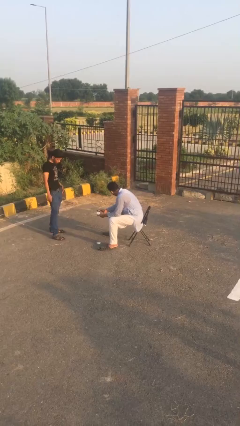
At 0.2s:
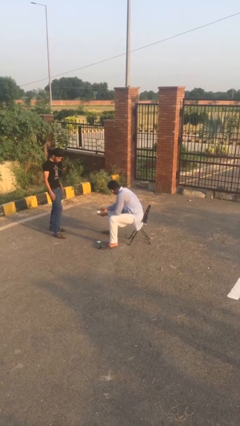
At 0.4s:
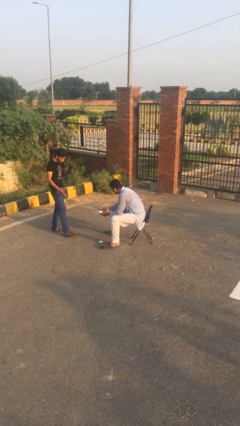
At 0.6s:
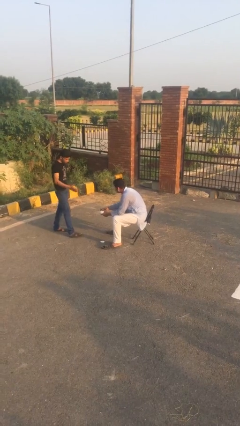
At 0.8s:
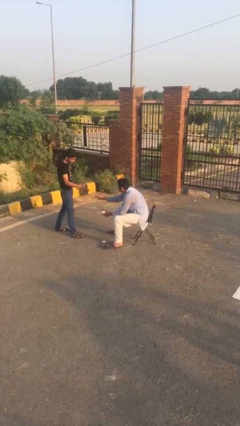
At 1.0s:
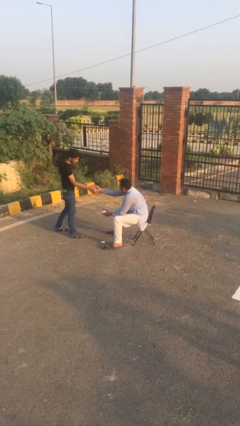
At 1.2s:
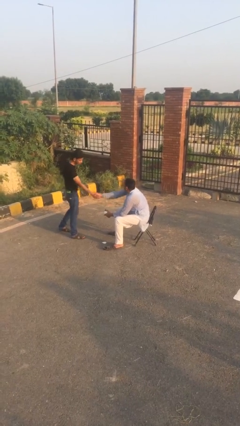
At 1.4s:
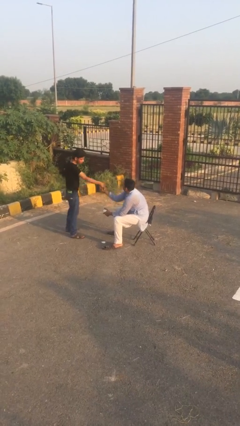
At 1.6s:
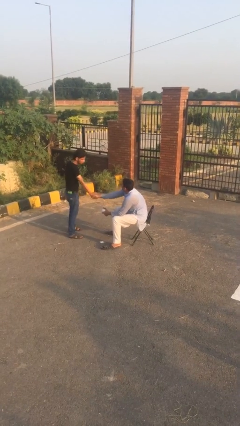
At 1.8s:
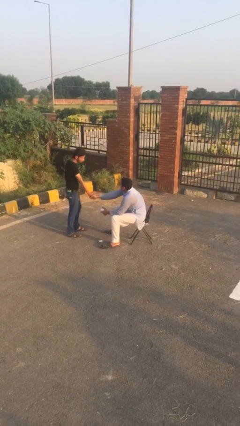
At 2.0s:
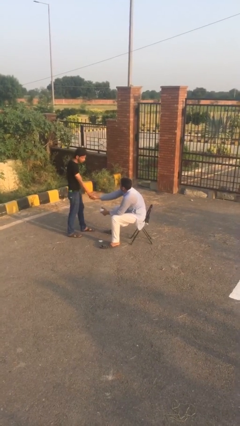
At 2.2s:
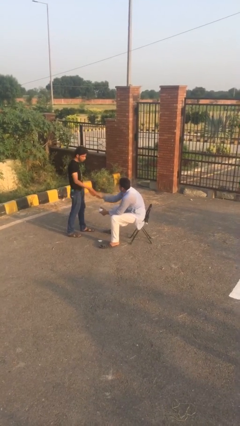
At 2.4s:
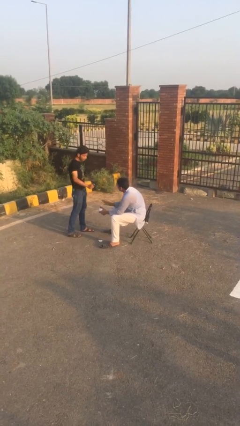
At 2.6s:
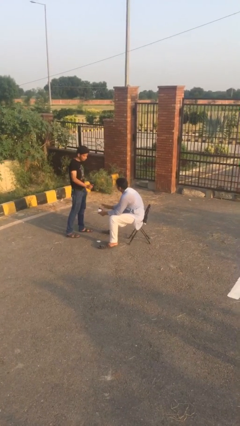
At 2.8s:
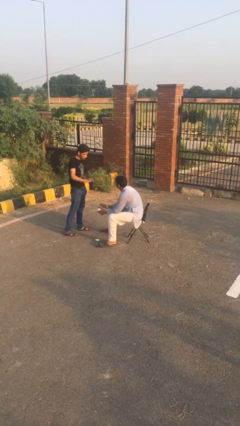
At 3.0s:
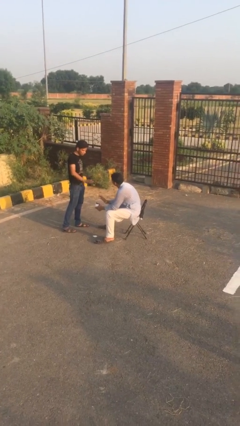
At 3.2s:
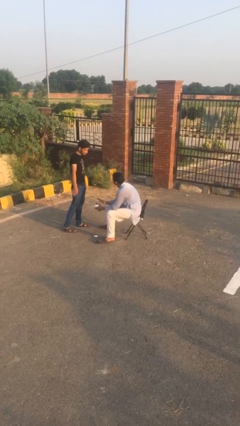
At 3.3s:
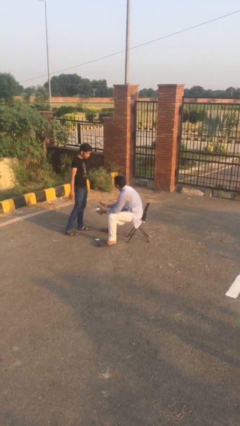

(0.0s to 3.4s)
person shakes hand

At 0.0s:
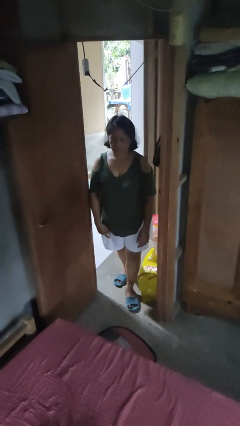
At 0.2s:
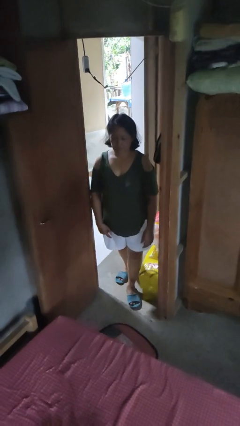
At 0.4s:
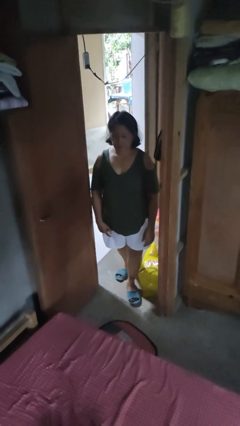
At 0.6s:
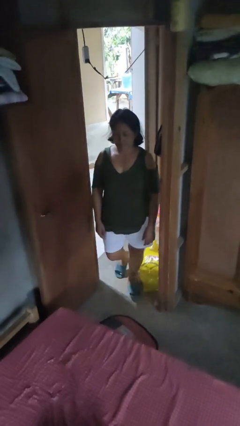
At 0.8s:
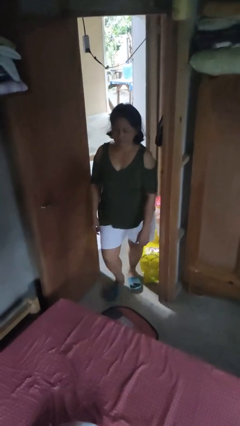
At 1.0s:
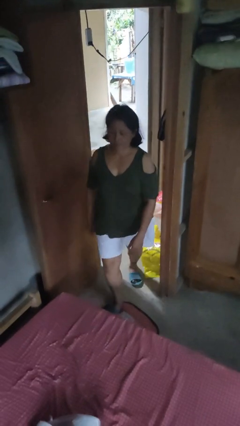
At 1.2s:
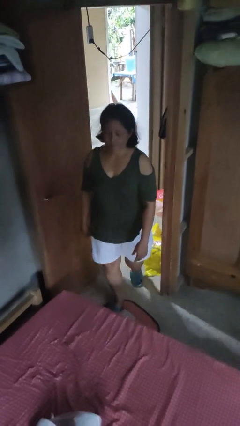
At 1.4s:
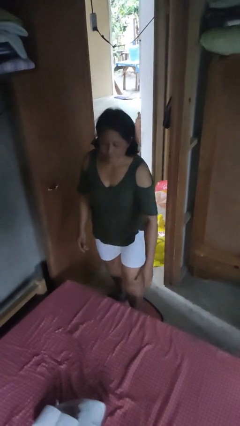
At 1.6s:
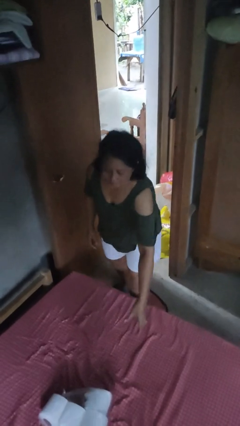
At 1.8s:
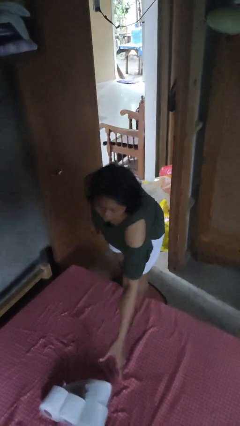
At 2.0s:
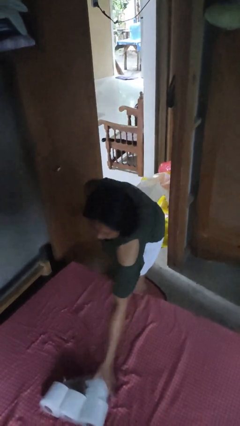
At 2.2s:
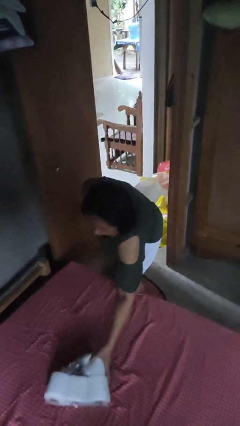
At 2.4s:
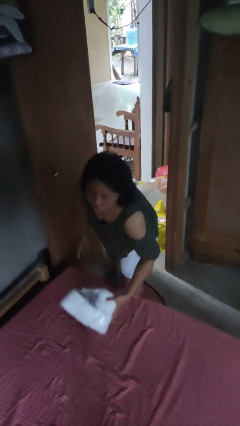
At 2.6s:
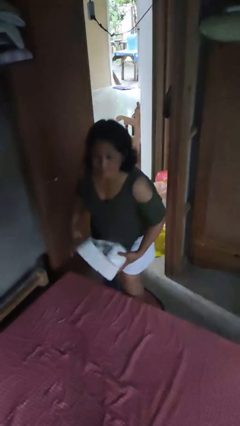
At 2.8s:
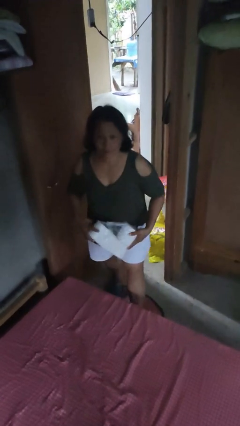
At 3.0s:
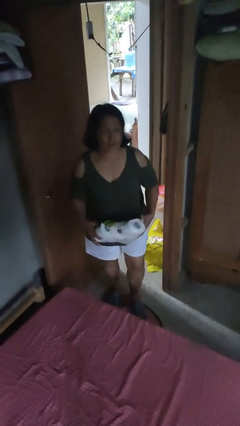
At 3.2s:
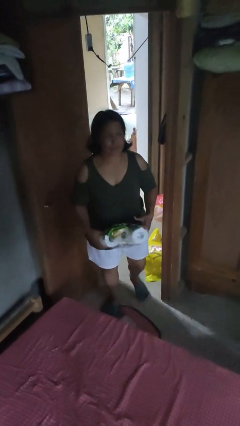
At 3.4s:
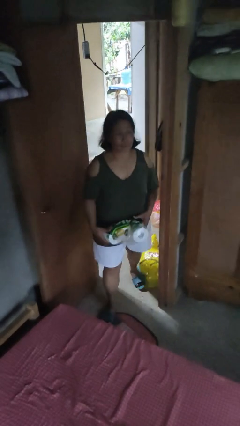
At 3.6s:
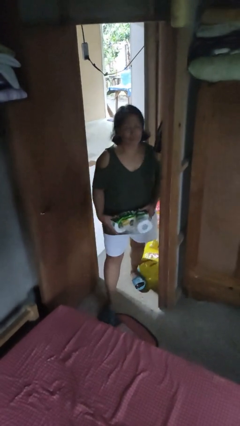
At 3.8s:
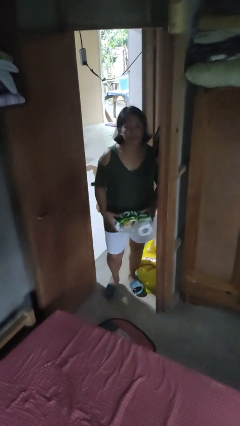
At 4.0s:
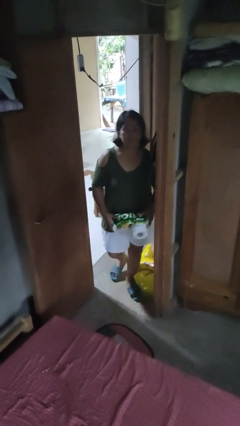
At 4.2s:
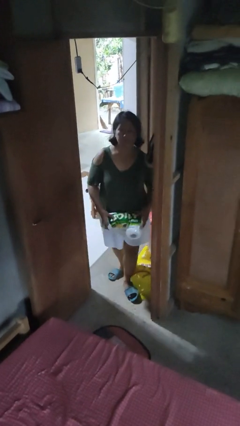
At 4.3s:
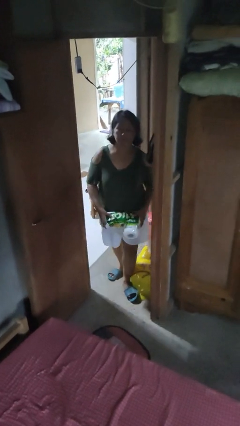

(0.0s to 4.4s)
person picks up object from bed

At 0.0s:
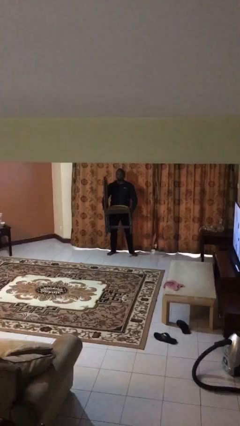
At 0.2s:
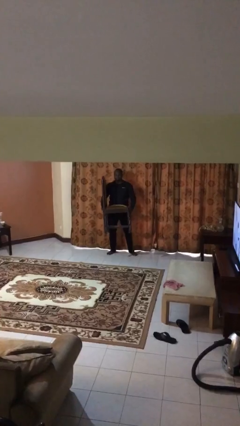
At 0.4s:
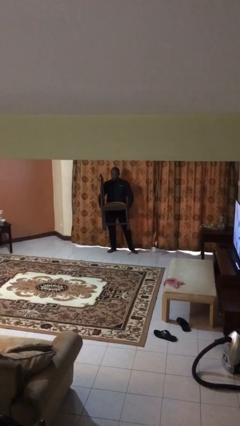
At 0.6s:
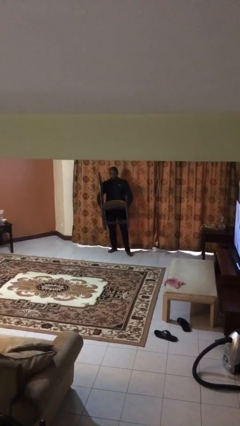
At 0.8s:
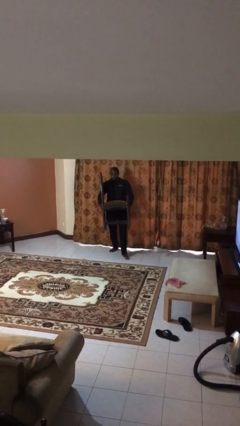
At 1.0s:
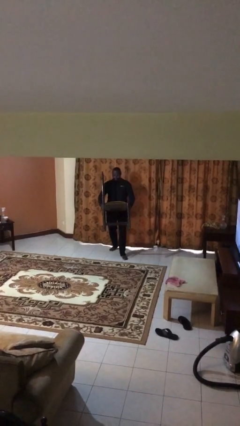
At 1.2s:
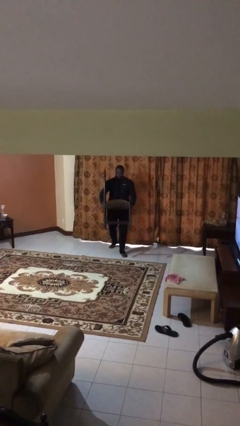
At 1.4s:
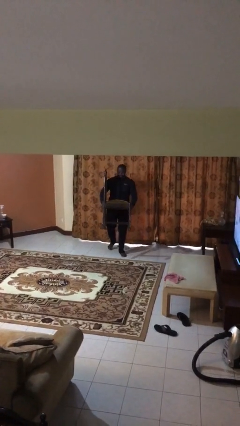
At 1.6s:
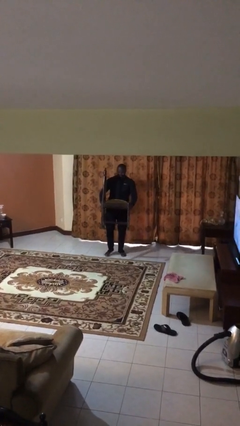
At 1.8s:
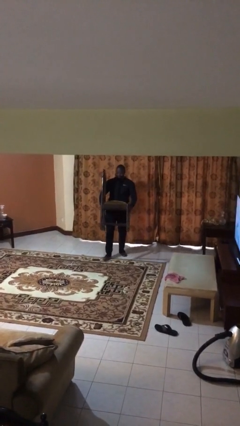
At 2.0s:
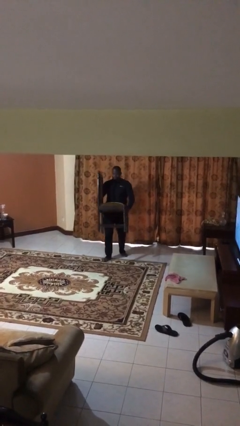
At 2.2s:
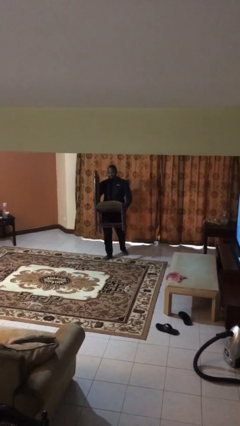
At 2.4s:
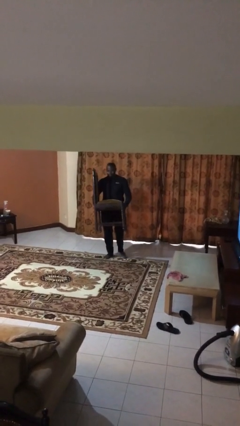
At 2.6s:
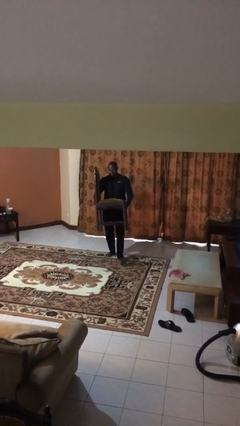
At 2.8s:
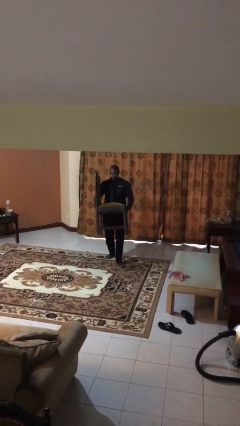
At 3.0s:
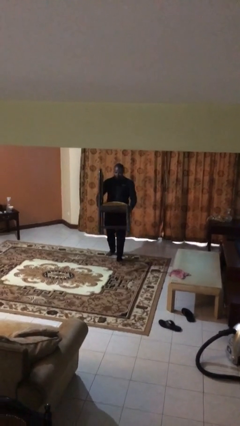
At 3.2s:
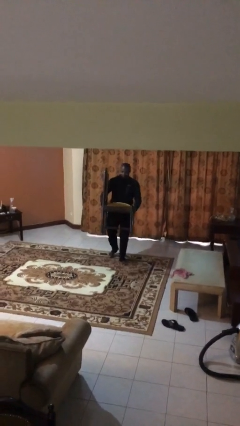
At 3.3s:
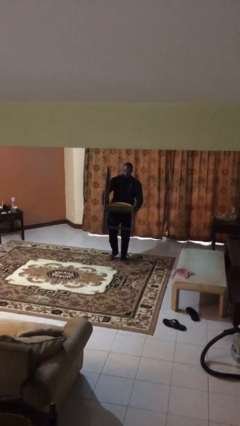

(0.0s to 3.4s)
person carries heavy object

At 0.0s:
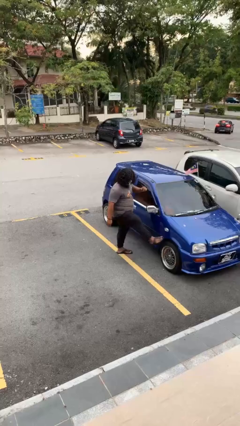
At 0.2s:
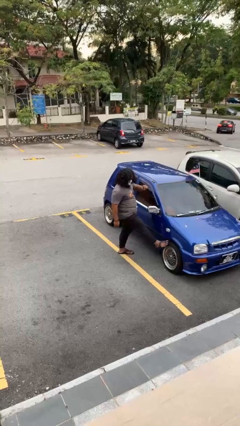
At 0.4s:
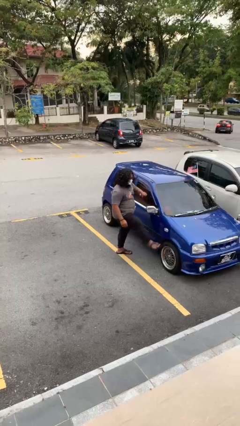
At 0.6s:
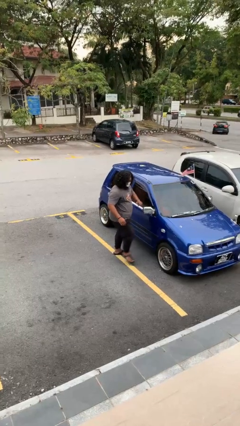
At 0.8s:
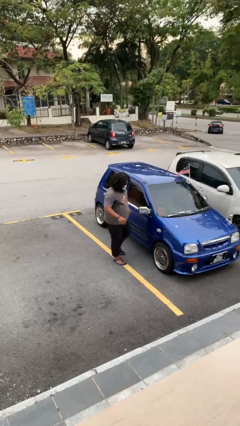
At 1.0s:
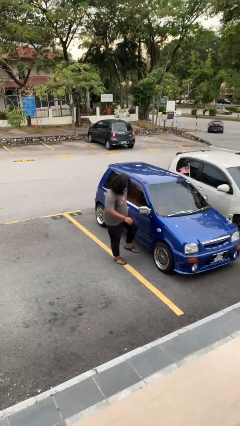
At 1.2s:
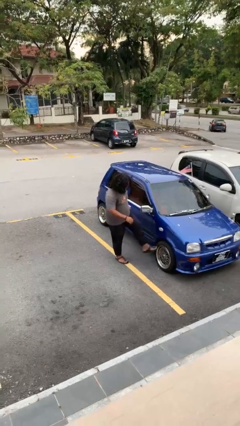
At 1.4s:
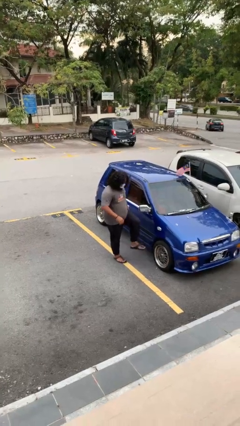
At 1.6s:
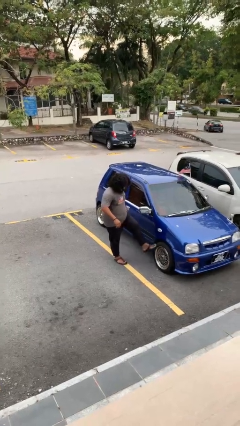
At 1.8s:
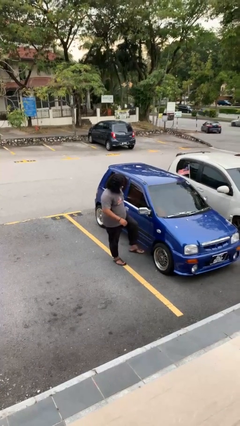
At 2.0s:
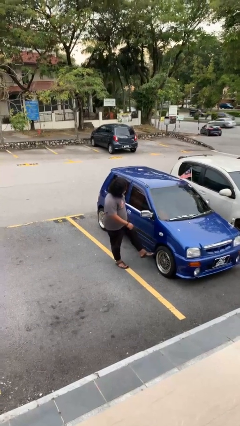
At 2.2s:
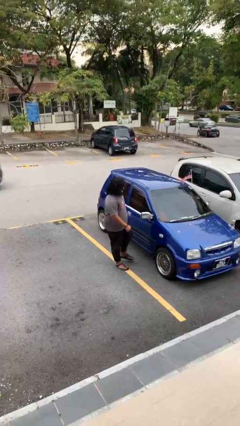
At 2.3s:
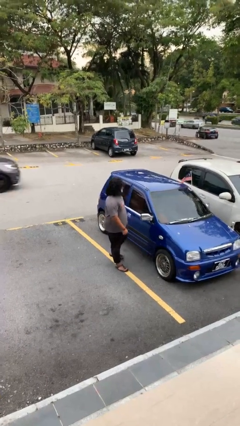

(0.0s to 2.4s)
person kicks car tires

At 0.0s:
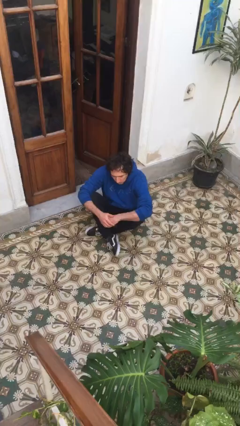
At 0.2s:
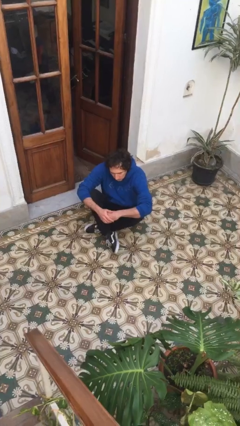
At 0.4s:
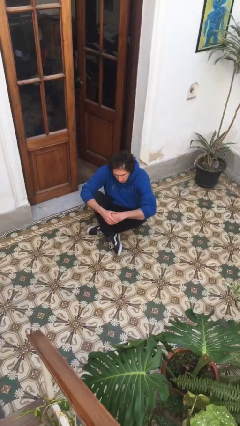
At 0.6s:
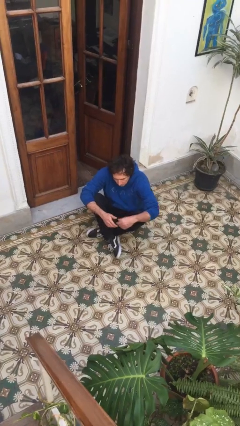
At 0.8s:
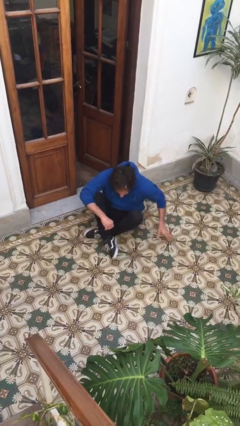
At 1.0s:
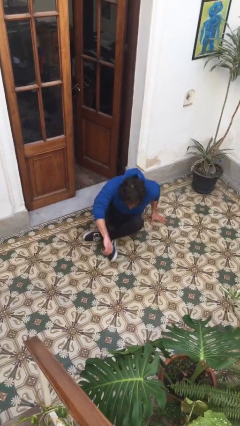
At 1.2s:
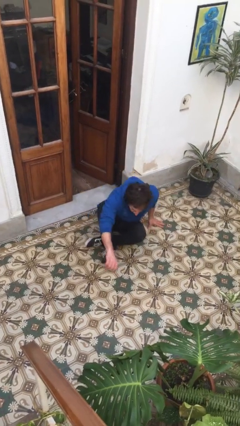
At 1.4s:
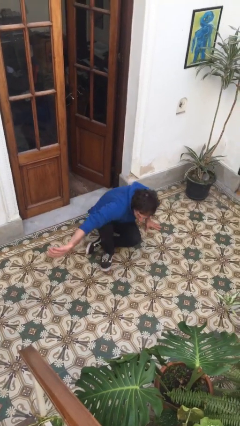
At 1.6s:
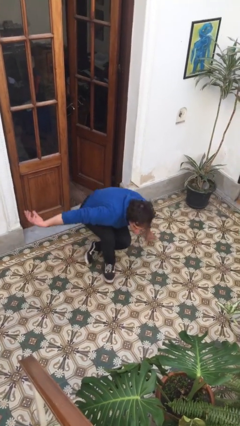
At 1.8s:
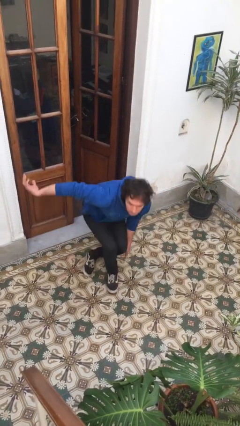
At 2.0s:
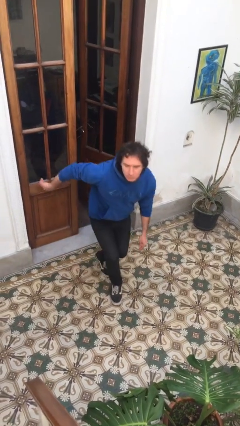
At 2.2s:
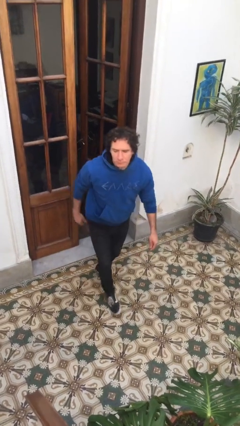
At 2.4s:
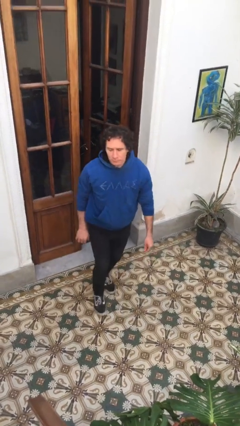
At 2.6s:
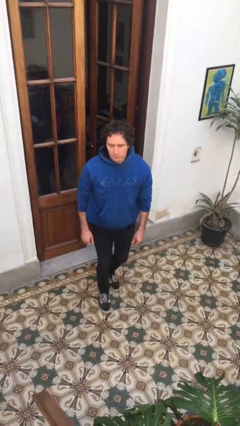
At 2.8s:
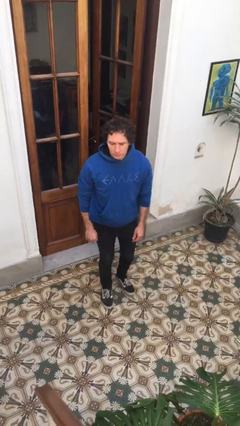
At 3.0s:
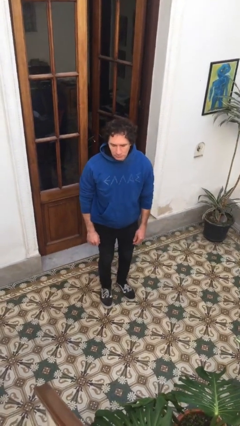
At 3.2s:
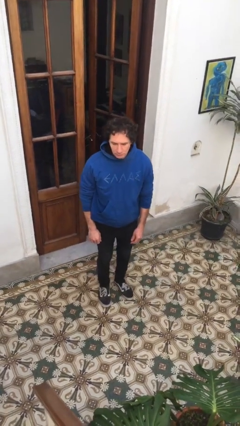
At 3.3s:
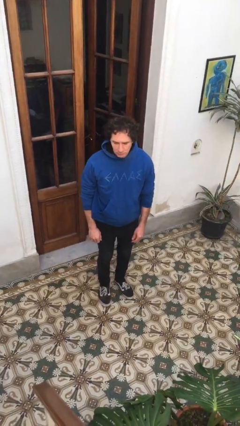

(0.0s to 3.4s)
person stands up from floor

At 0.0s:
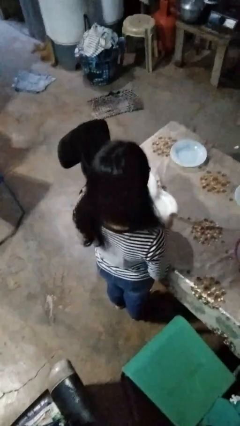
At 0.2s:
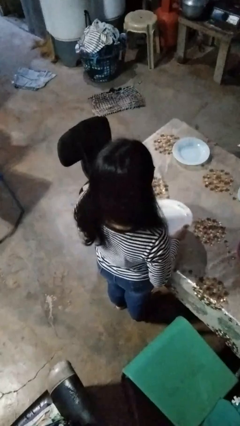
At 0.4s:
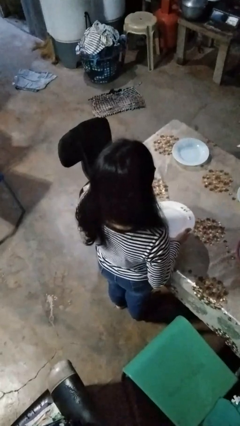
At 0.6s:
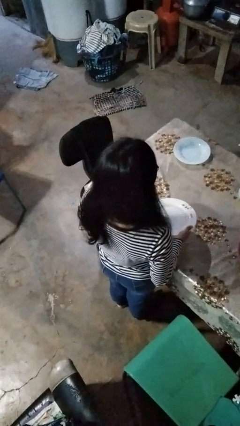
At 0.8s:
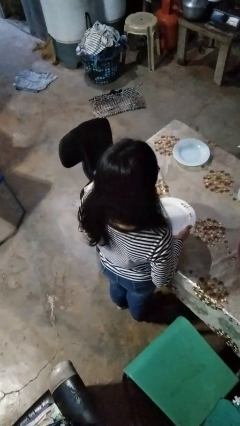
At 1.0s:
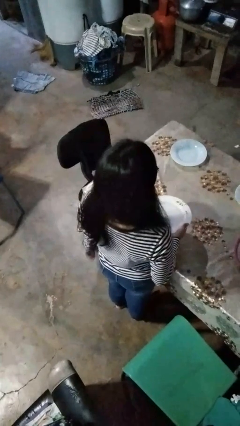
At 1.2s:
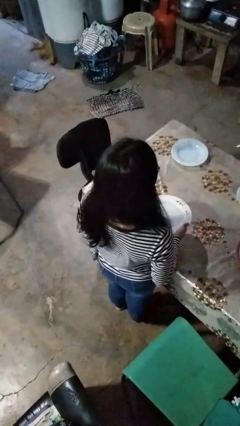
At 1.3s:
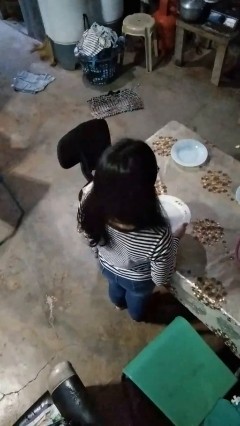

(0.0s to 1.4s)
person sets table
